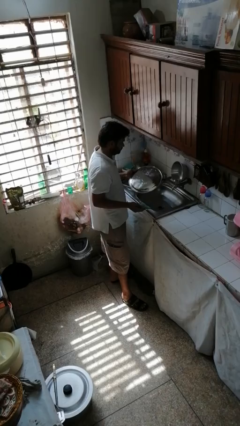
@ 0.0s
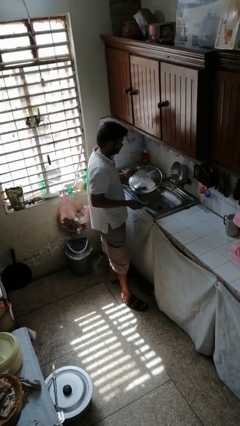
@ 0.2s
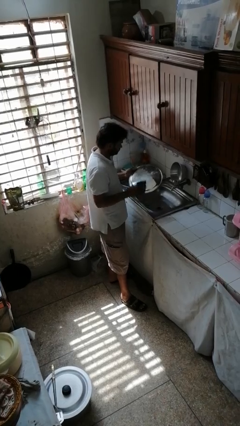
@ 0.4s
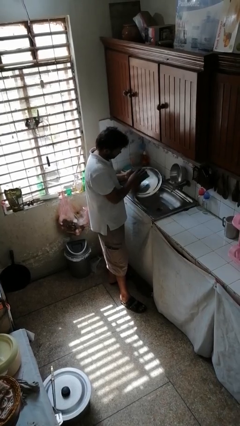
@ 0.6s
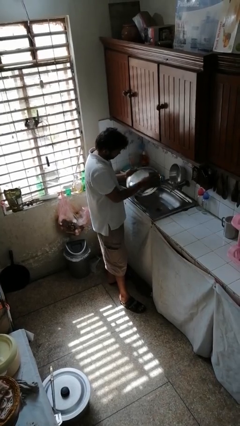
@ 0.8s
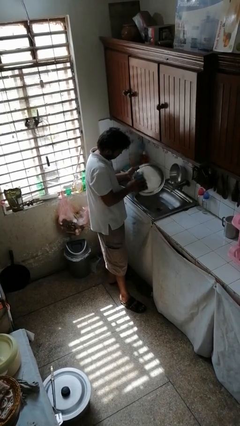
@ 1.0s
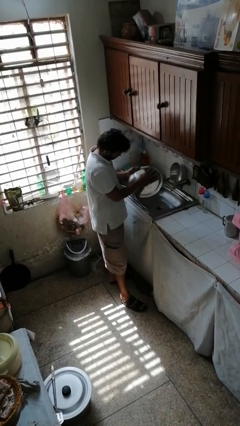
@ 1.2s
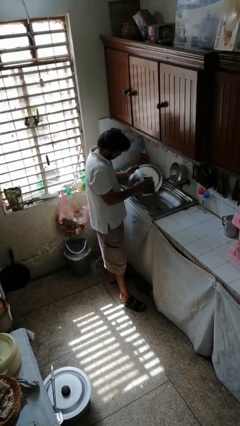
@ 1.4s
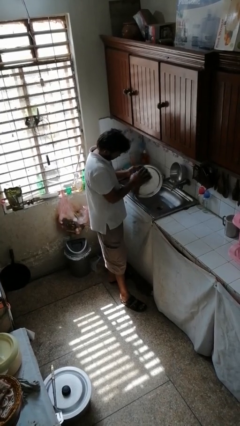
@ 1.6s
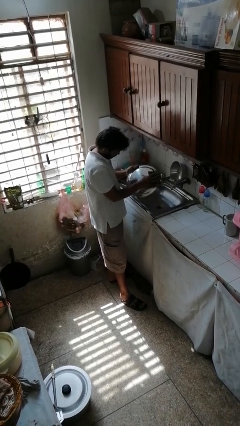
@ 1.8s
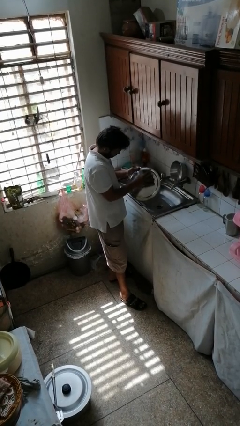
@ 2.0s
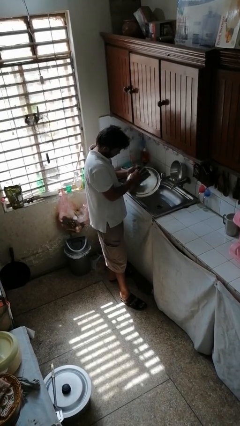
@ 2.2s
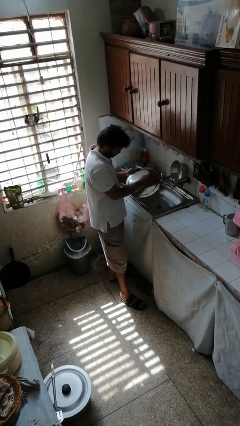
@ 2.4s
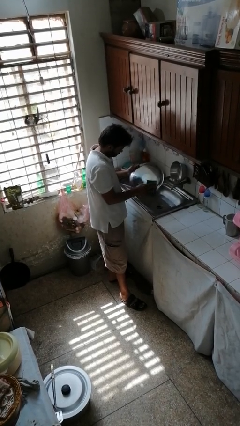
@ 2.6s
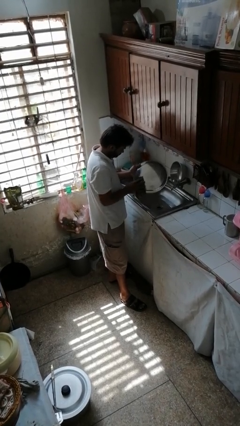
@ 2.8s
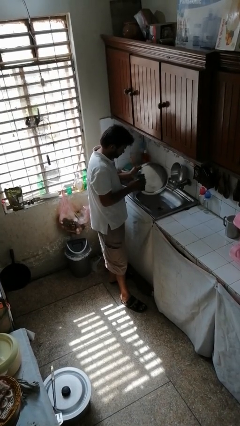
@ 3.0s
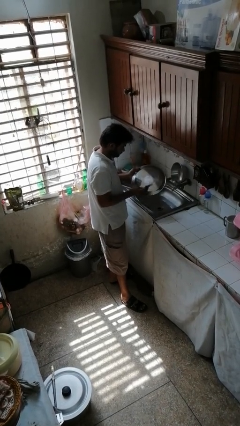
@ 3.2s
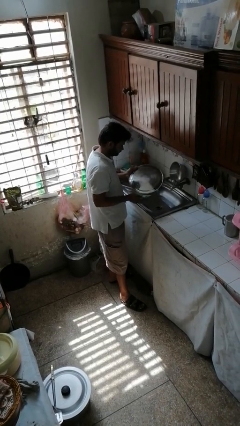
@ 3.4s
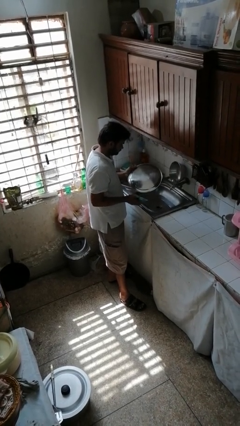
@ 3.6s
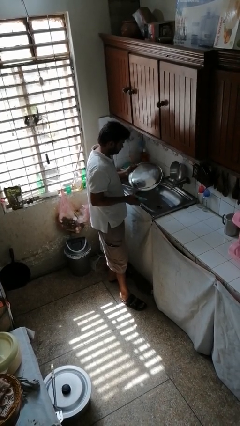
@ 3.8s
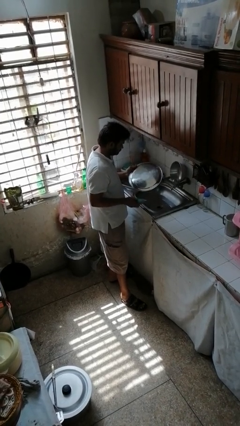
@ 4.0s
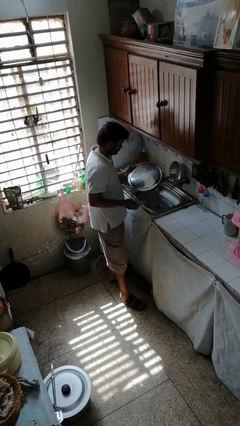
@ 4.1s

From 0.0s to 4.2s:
person washes dish

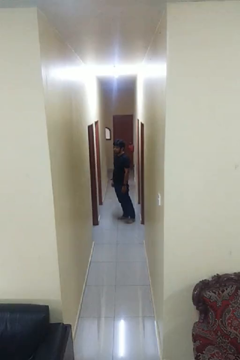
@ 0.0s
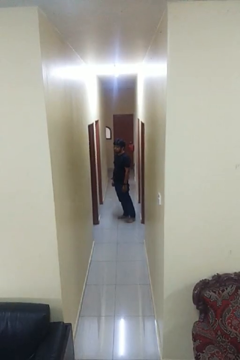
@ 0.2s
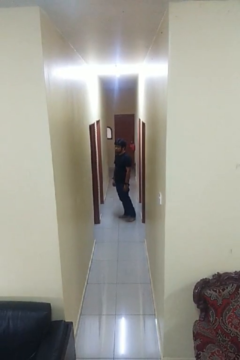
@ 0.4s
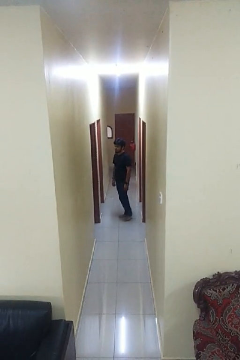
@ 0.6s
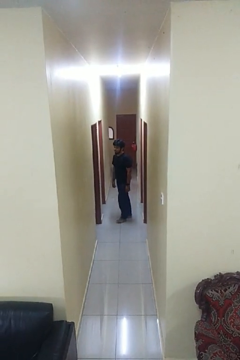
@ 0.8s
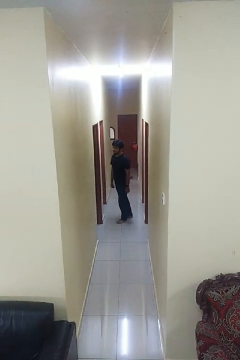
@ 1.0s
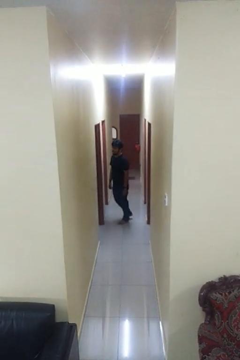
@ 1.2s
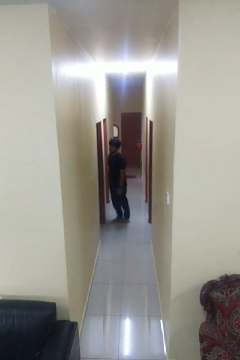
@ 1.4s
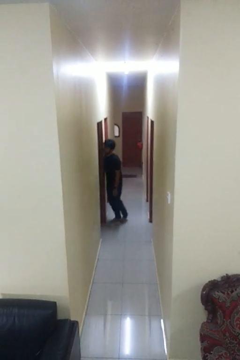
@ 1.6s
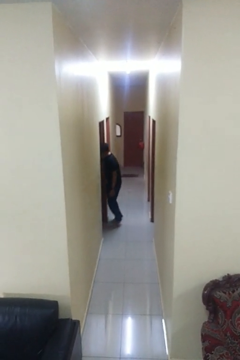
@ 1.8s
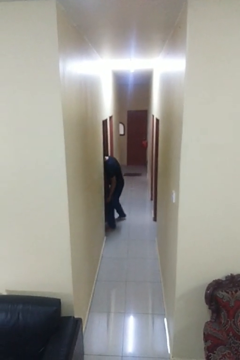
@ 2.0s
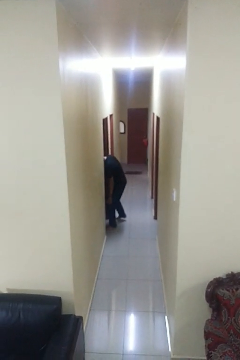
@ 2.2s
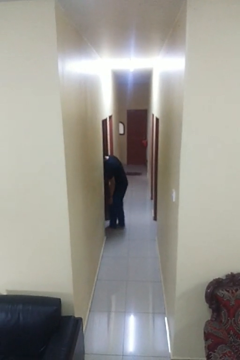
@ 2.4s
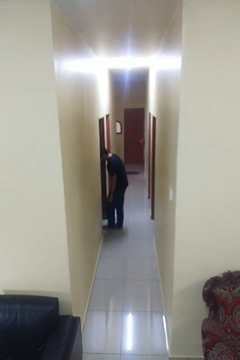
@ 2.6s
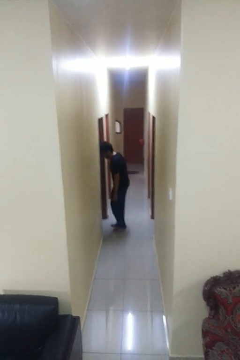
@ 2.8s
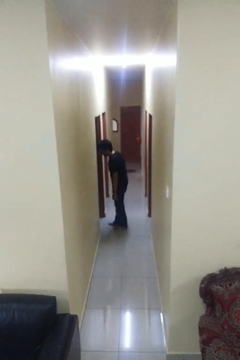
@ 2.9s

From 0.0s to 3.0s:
person bumps into wall

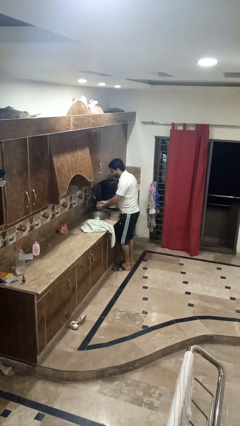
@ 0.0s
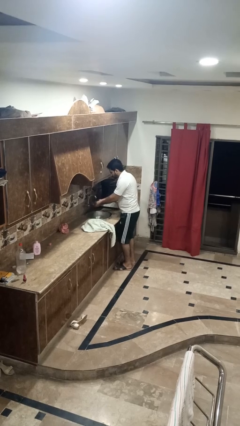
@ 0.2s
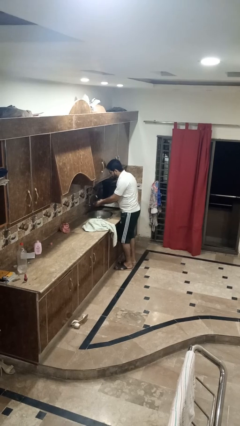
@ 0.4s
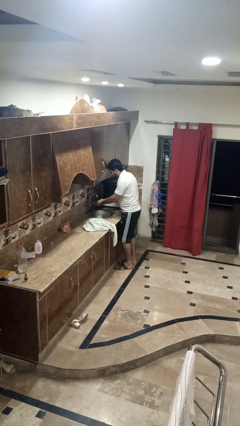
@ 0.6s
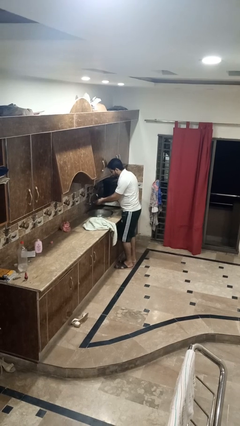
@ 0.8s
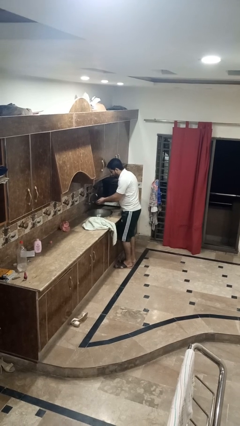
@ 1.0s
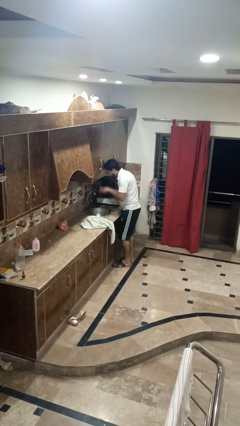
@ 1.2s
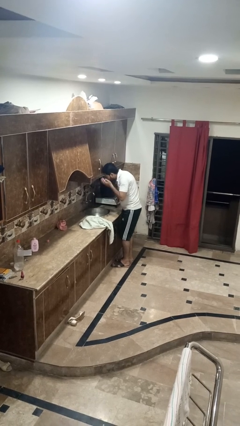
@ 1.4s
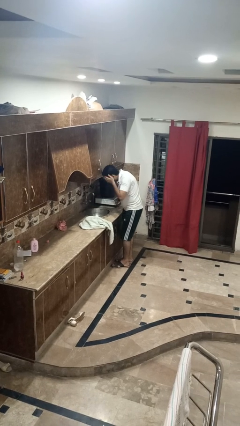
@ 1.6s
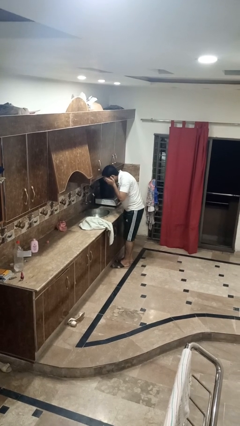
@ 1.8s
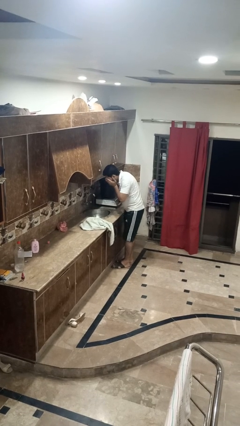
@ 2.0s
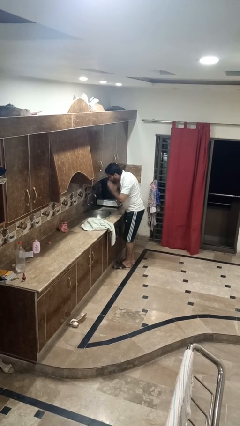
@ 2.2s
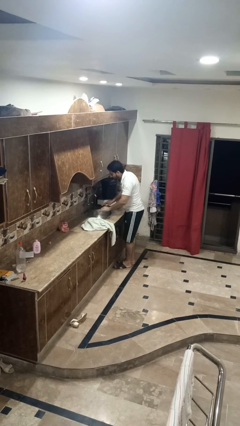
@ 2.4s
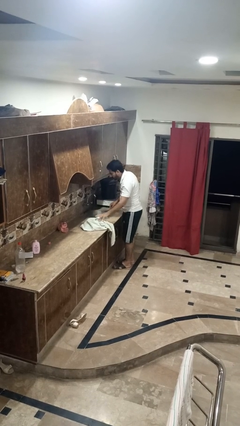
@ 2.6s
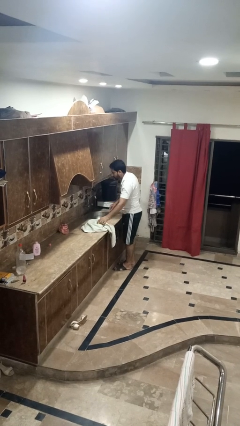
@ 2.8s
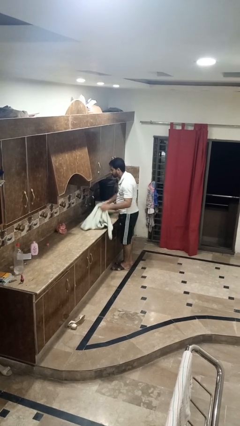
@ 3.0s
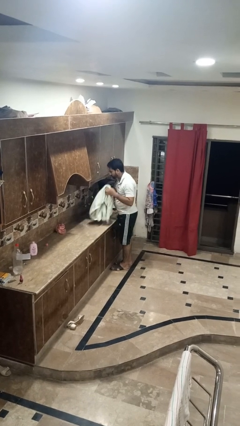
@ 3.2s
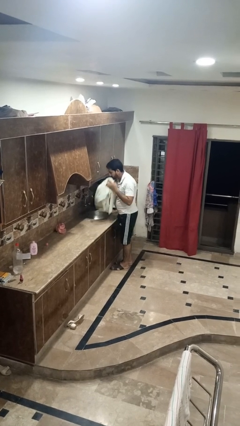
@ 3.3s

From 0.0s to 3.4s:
person washes face

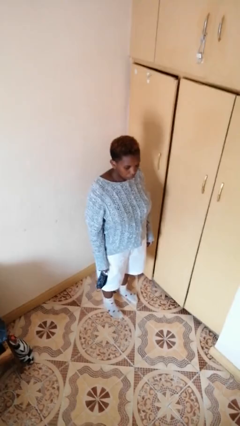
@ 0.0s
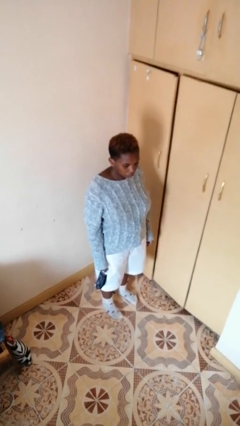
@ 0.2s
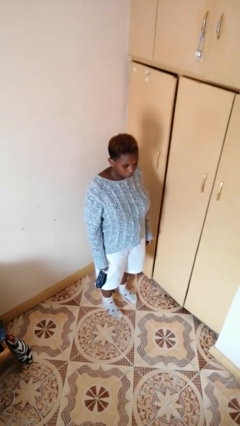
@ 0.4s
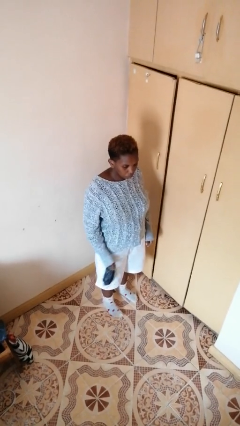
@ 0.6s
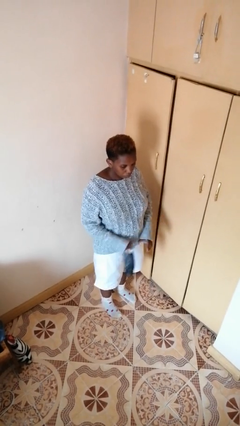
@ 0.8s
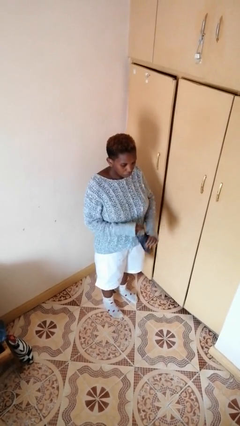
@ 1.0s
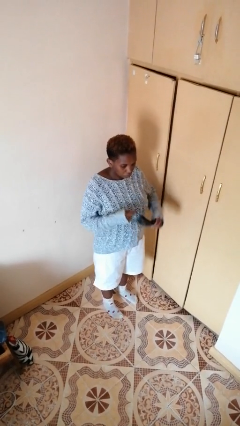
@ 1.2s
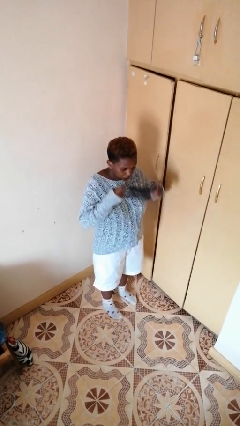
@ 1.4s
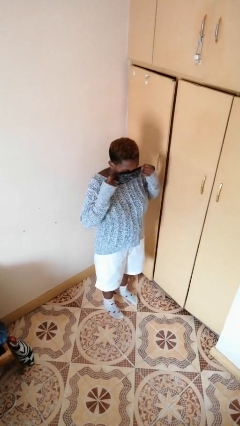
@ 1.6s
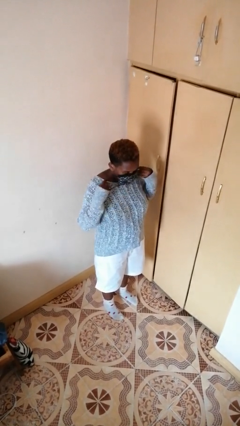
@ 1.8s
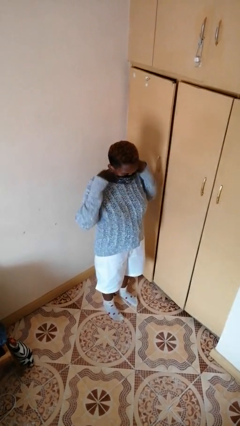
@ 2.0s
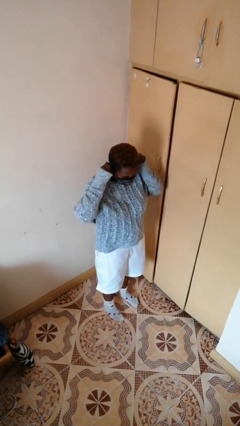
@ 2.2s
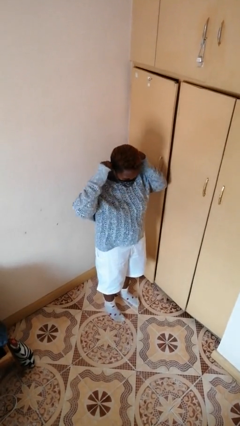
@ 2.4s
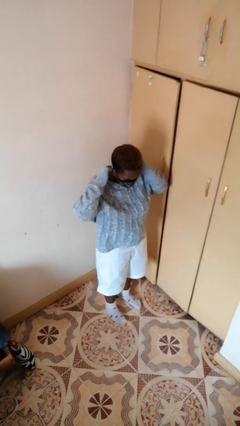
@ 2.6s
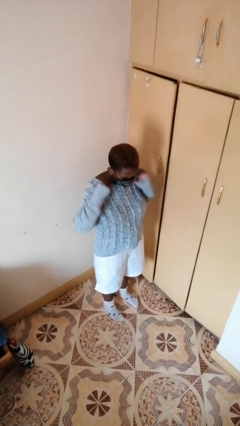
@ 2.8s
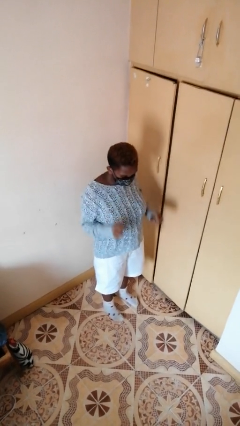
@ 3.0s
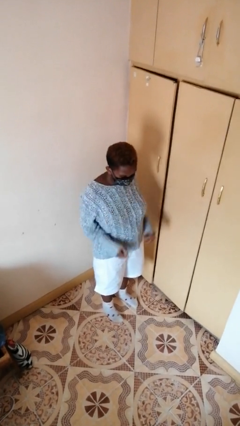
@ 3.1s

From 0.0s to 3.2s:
person puts on facemask

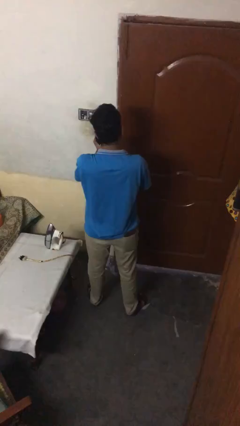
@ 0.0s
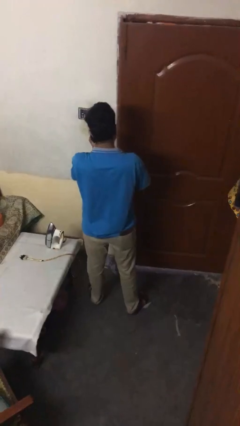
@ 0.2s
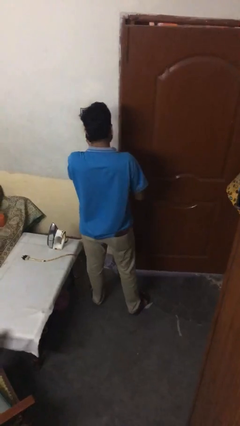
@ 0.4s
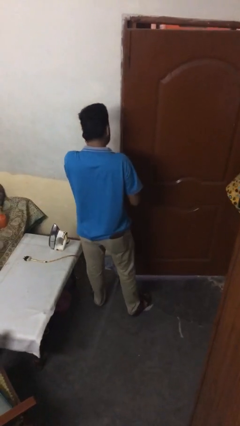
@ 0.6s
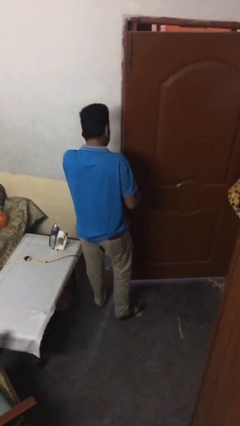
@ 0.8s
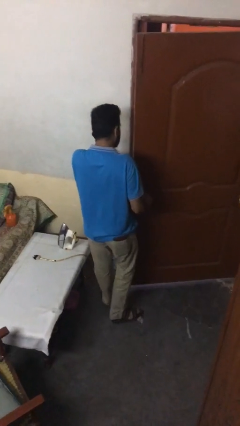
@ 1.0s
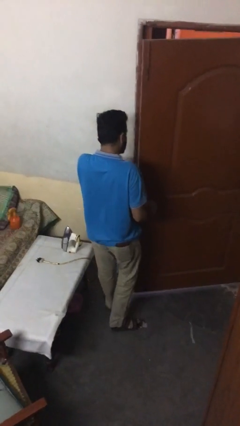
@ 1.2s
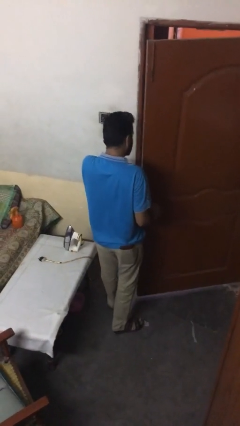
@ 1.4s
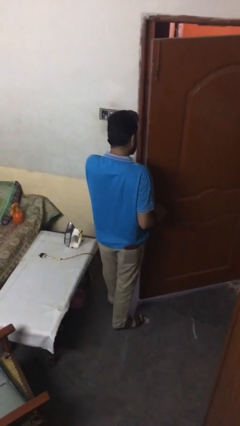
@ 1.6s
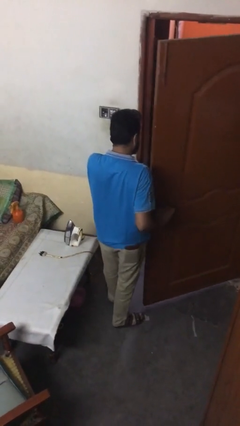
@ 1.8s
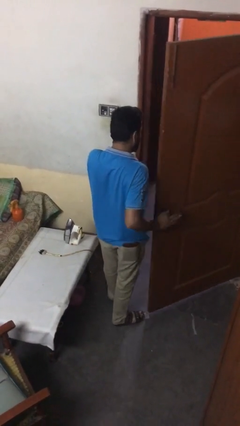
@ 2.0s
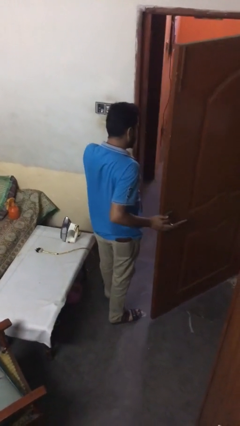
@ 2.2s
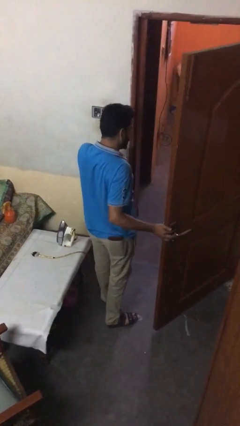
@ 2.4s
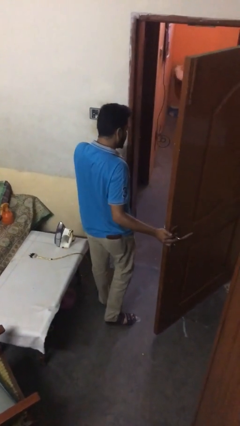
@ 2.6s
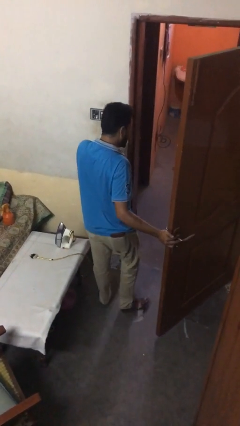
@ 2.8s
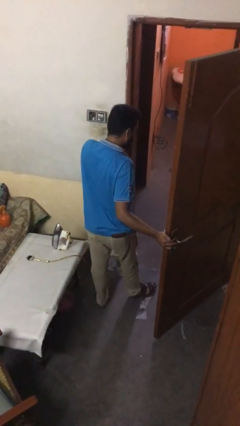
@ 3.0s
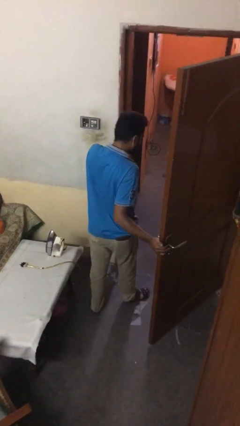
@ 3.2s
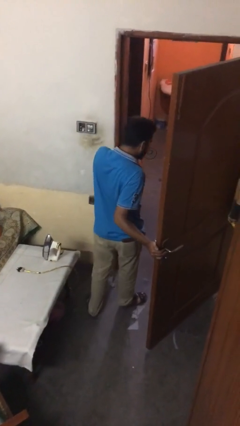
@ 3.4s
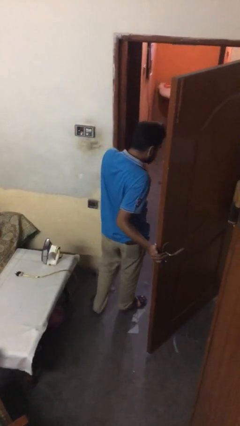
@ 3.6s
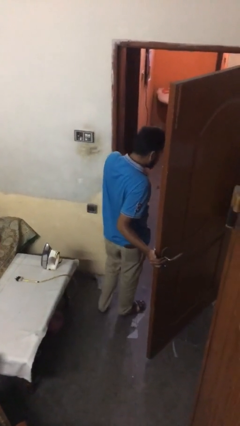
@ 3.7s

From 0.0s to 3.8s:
person opens facility door

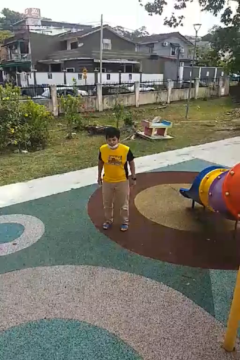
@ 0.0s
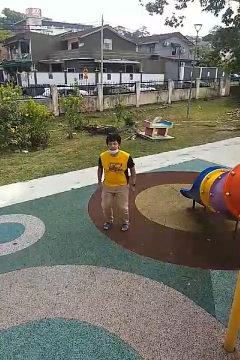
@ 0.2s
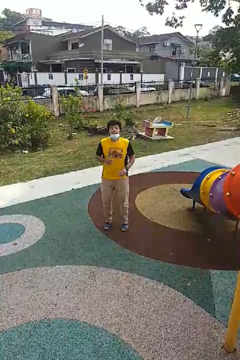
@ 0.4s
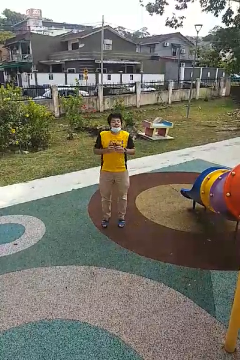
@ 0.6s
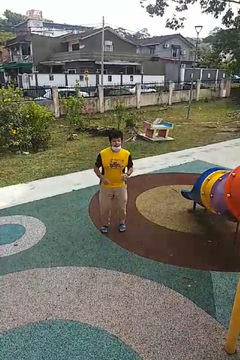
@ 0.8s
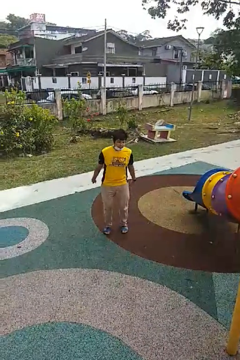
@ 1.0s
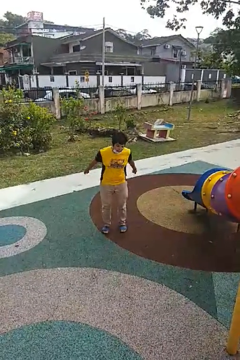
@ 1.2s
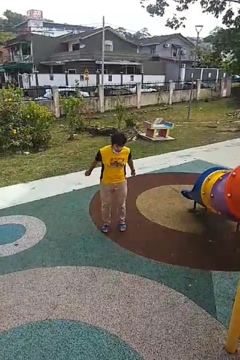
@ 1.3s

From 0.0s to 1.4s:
person jumps
